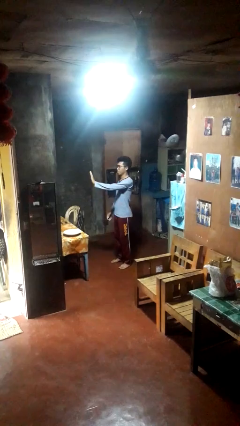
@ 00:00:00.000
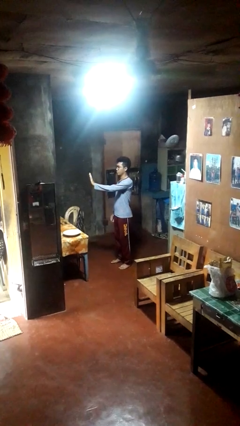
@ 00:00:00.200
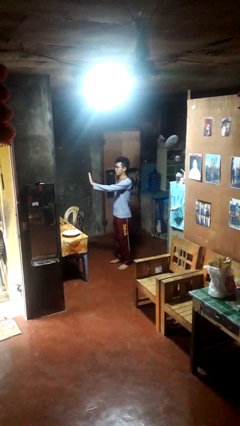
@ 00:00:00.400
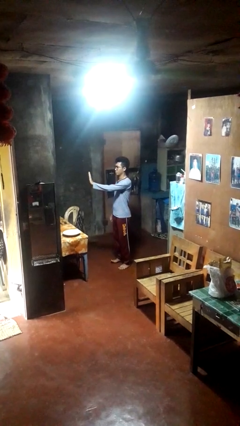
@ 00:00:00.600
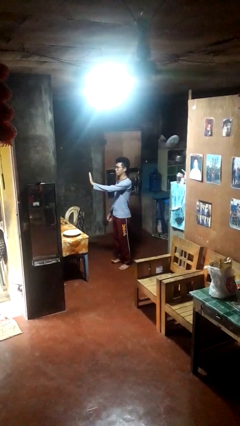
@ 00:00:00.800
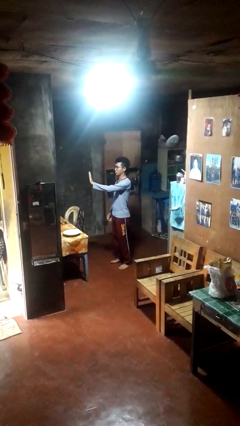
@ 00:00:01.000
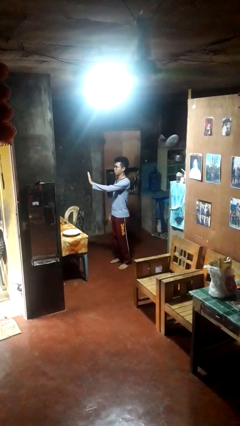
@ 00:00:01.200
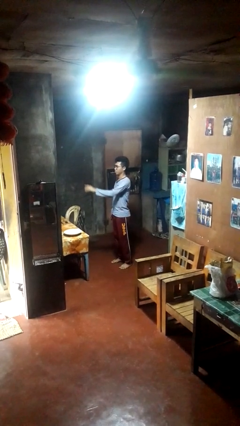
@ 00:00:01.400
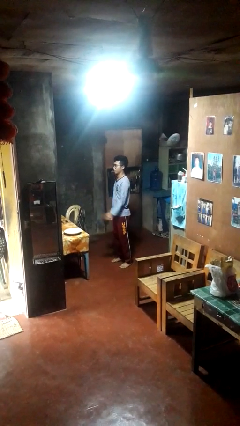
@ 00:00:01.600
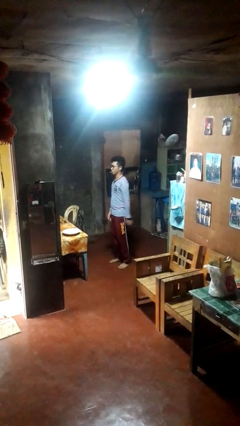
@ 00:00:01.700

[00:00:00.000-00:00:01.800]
person gestures stop

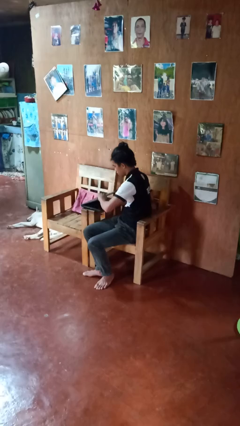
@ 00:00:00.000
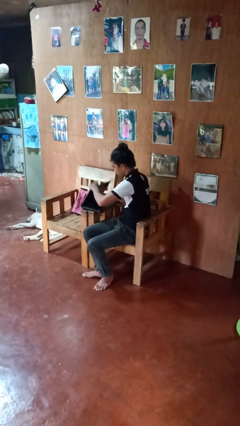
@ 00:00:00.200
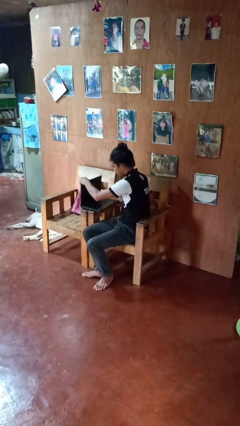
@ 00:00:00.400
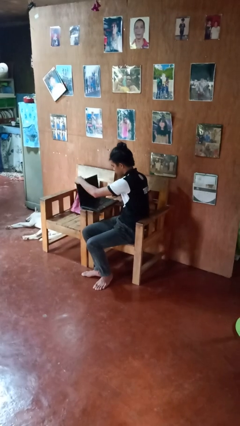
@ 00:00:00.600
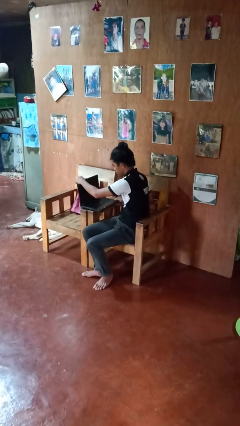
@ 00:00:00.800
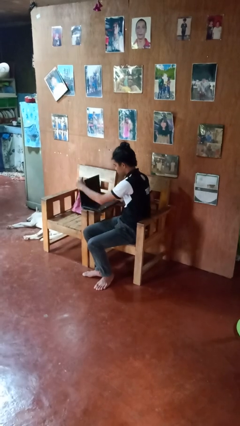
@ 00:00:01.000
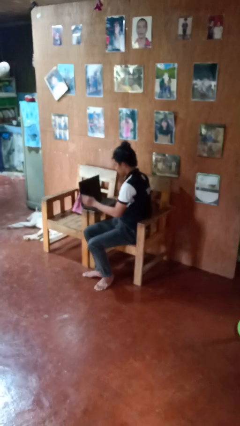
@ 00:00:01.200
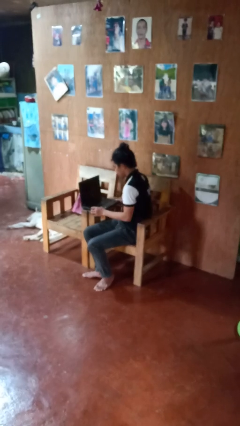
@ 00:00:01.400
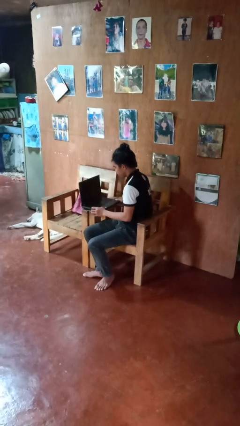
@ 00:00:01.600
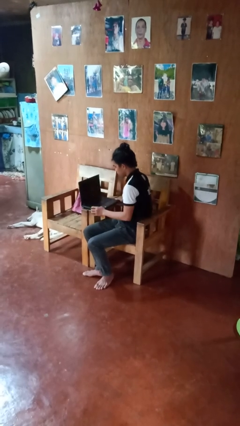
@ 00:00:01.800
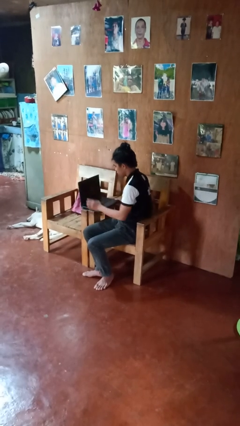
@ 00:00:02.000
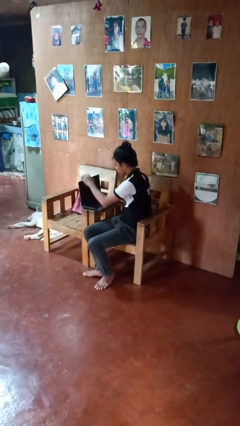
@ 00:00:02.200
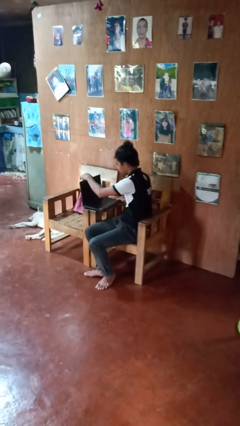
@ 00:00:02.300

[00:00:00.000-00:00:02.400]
person opens laptop

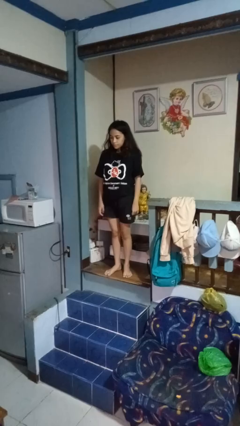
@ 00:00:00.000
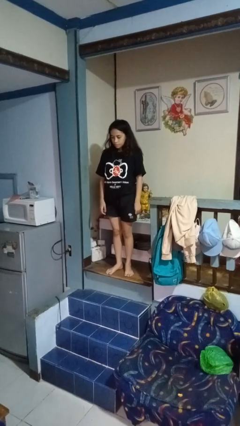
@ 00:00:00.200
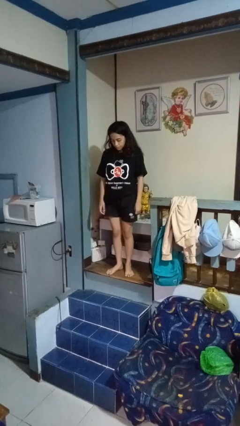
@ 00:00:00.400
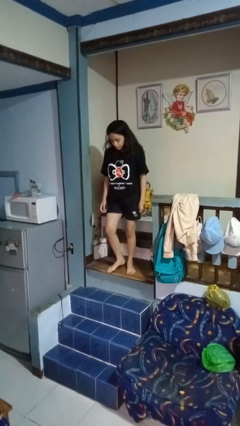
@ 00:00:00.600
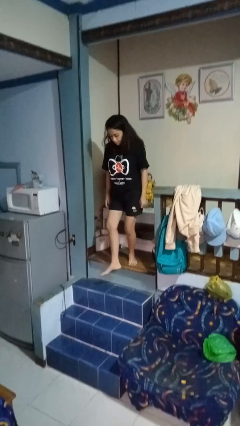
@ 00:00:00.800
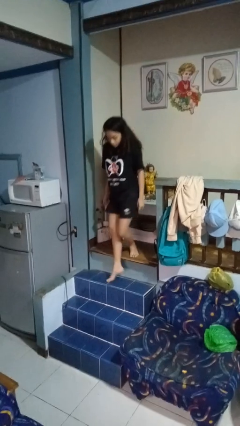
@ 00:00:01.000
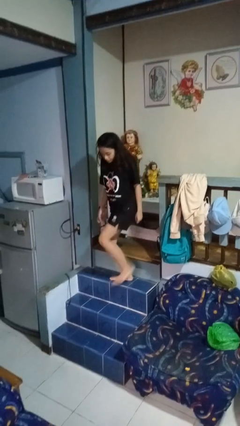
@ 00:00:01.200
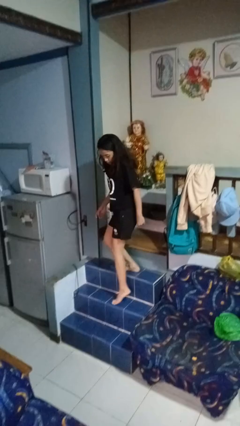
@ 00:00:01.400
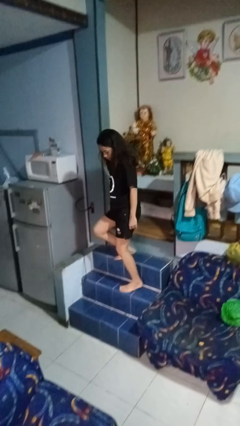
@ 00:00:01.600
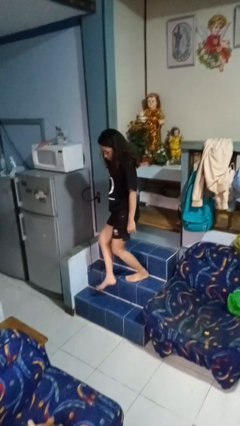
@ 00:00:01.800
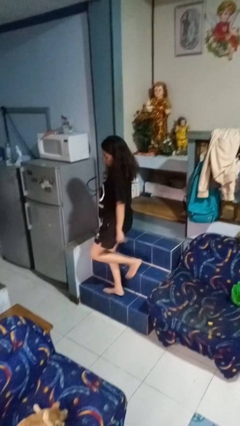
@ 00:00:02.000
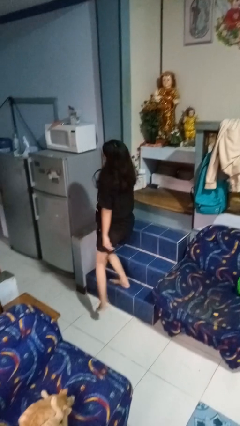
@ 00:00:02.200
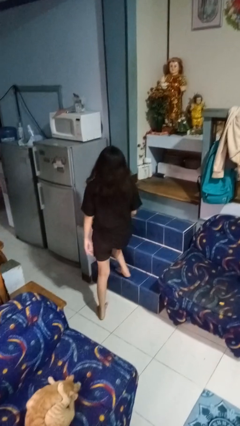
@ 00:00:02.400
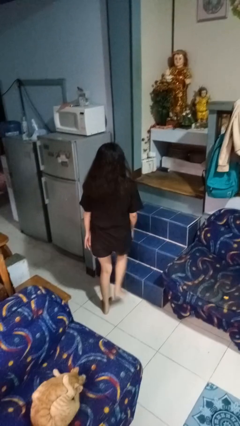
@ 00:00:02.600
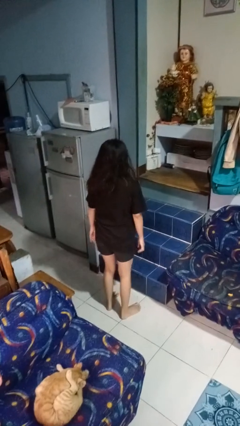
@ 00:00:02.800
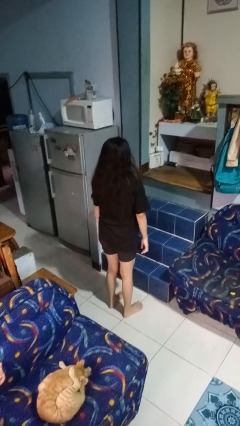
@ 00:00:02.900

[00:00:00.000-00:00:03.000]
person climbs down stairs

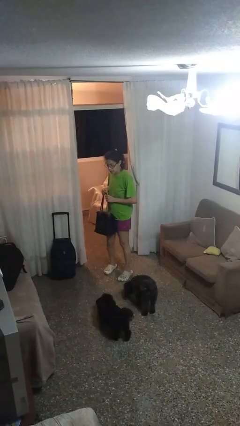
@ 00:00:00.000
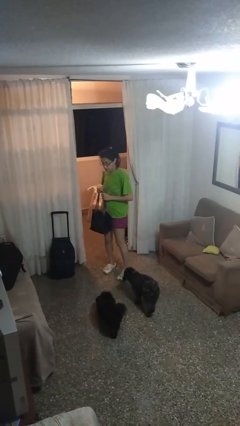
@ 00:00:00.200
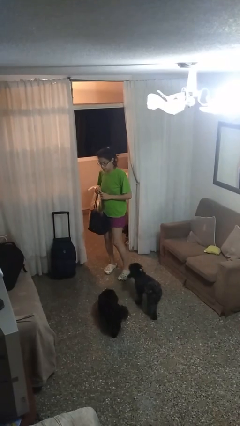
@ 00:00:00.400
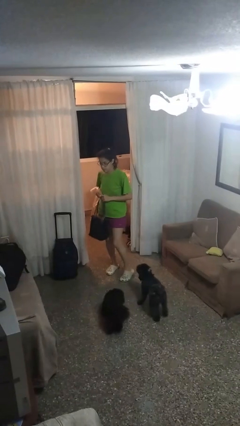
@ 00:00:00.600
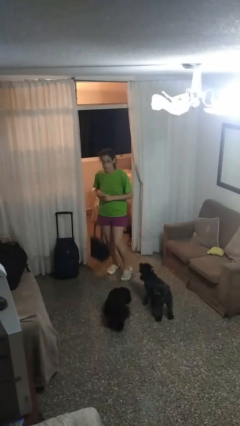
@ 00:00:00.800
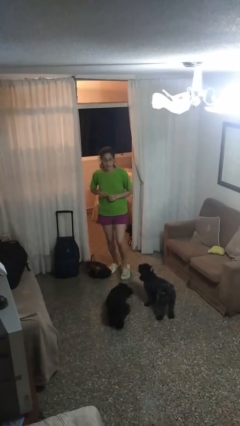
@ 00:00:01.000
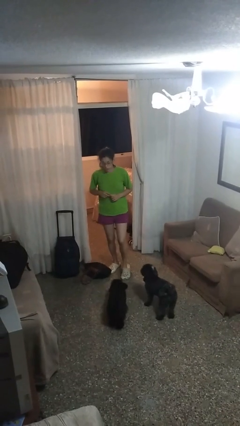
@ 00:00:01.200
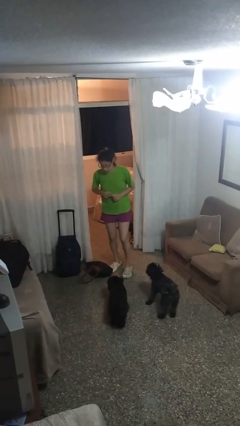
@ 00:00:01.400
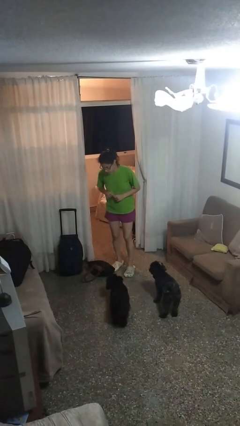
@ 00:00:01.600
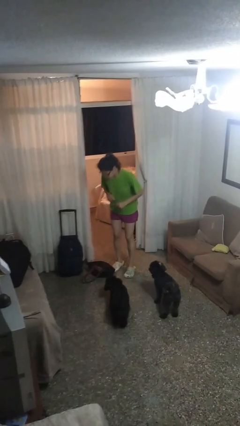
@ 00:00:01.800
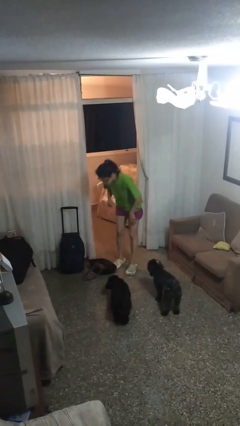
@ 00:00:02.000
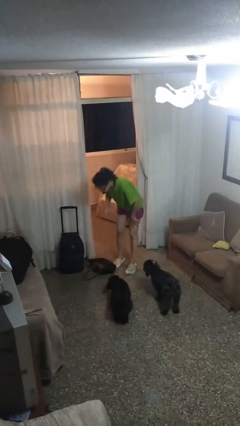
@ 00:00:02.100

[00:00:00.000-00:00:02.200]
person drops object

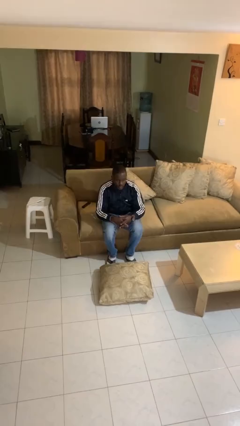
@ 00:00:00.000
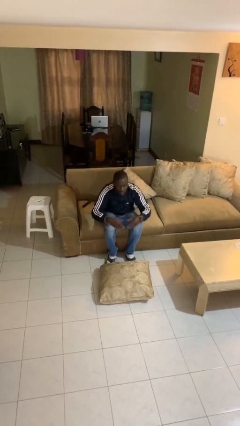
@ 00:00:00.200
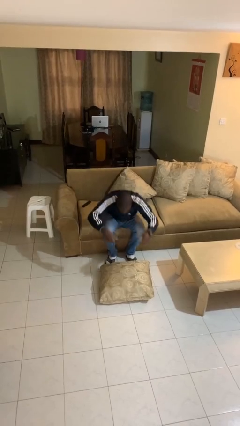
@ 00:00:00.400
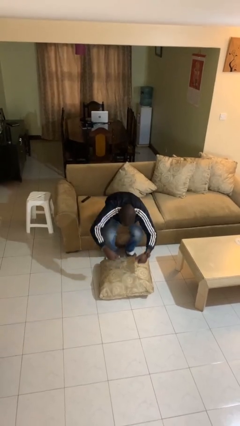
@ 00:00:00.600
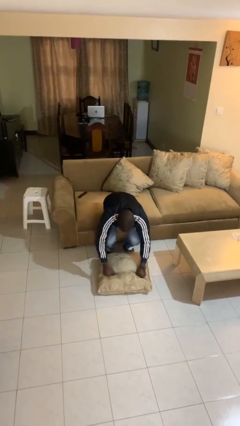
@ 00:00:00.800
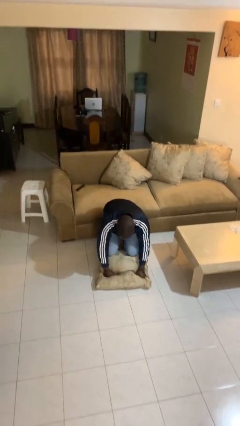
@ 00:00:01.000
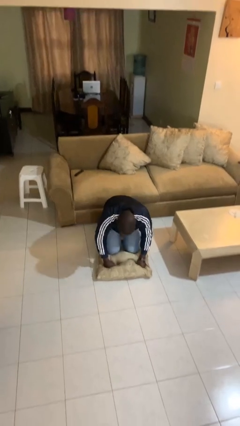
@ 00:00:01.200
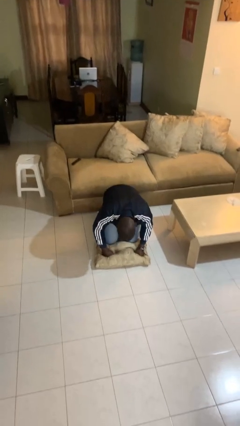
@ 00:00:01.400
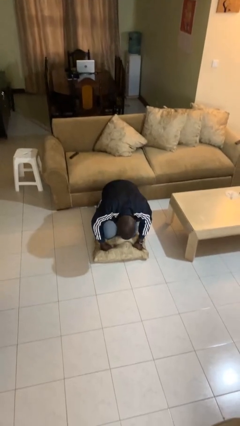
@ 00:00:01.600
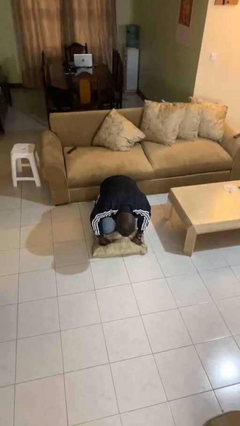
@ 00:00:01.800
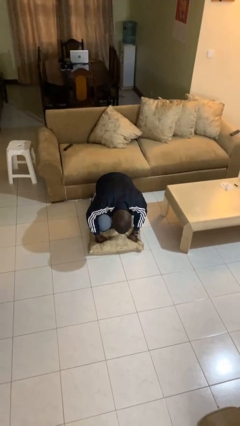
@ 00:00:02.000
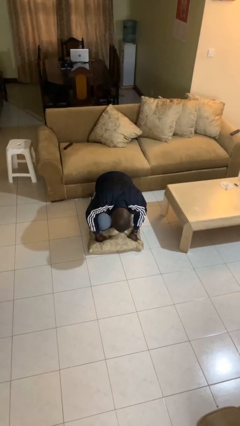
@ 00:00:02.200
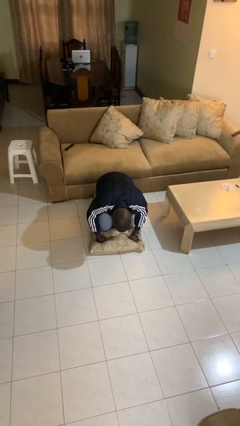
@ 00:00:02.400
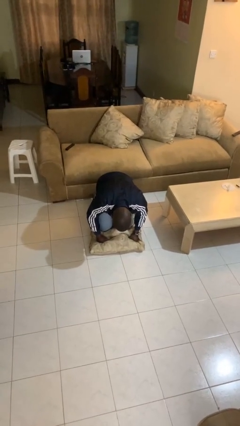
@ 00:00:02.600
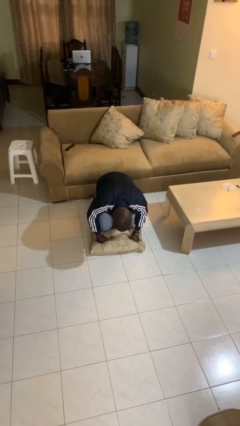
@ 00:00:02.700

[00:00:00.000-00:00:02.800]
person falls from chair

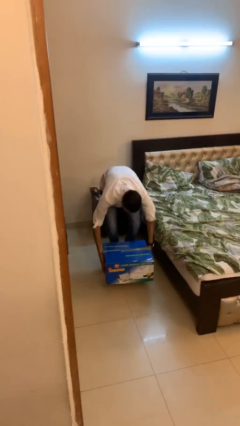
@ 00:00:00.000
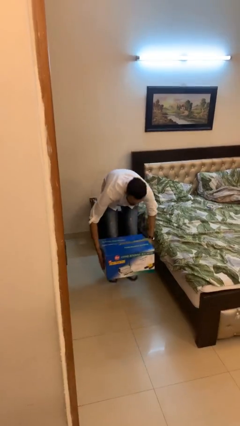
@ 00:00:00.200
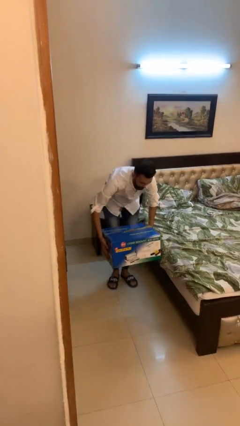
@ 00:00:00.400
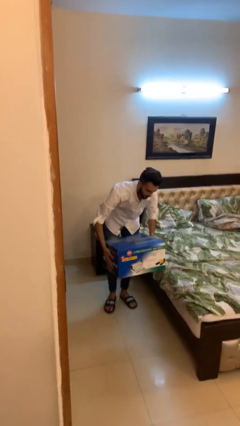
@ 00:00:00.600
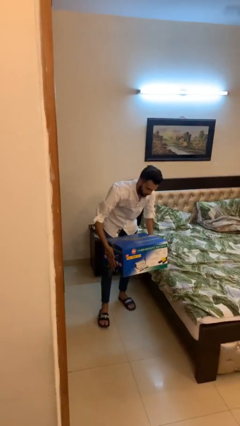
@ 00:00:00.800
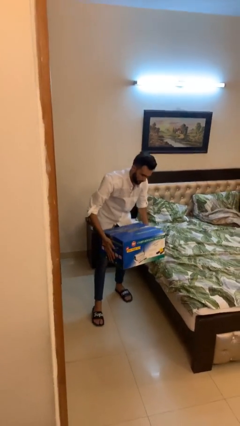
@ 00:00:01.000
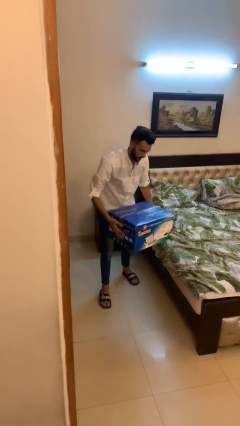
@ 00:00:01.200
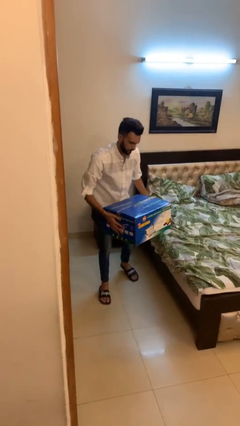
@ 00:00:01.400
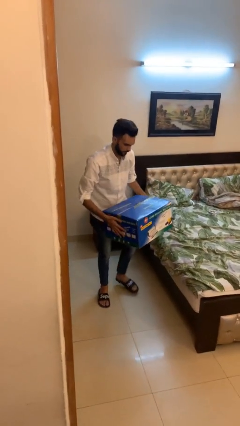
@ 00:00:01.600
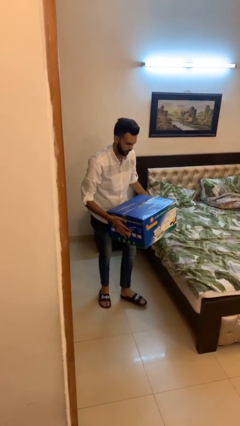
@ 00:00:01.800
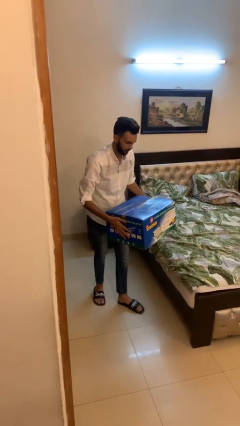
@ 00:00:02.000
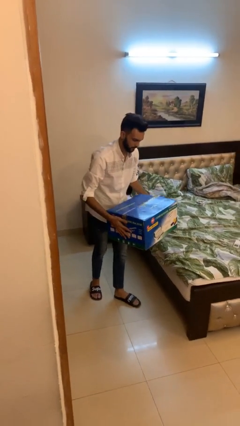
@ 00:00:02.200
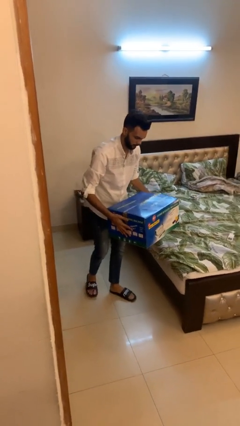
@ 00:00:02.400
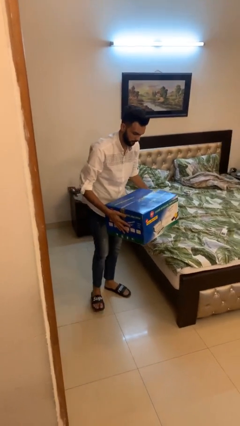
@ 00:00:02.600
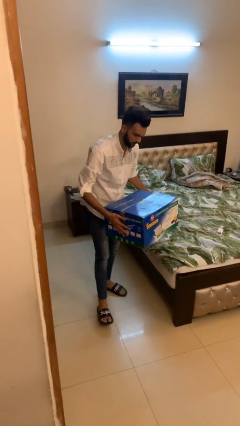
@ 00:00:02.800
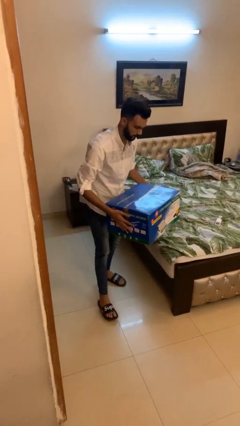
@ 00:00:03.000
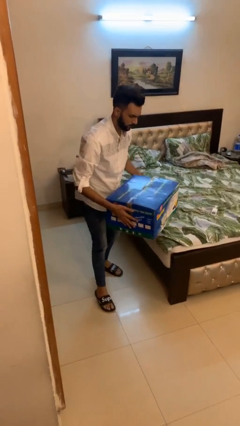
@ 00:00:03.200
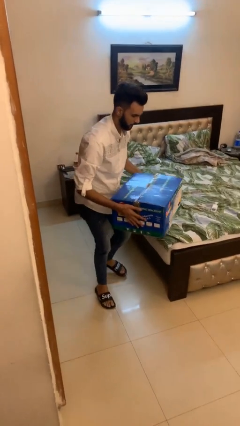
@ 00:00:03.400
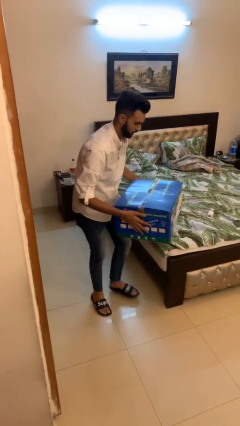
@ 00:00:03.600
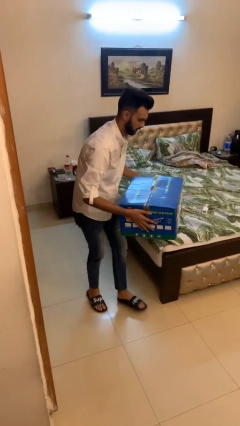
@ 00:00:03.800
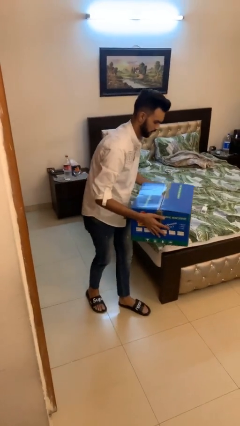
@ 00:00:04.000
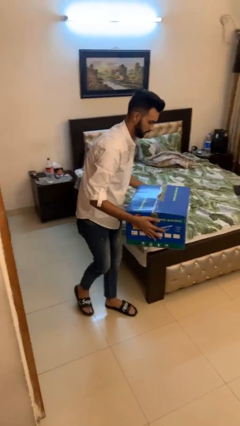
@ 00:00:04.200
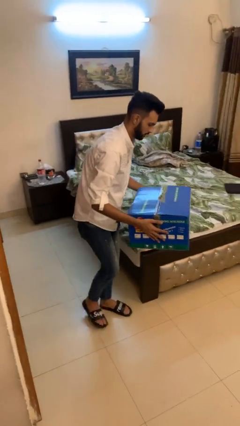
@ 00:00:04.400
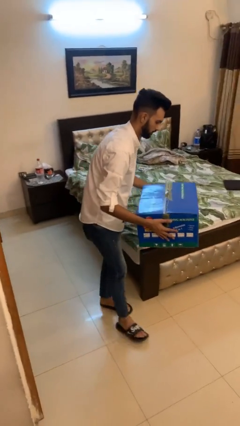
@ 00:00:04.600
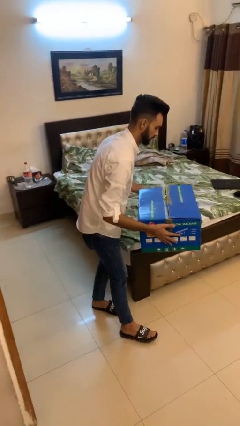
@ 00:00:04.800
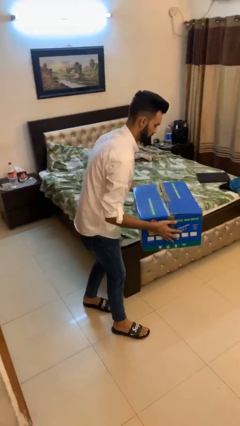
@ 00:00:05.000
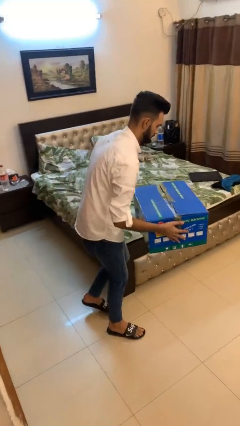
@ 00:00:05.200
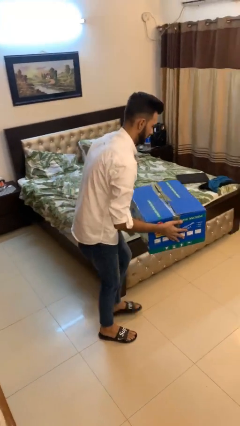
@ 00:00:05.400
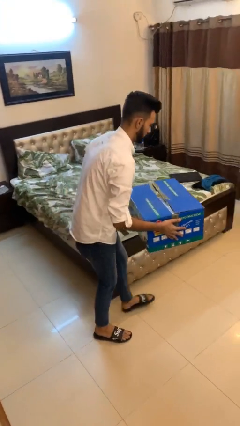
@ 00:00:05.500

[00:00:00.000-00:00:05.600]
person carries heavy object
